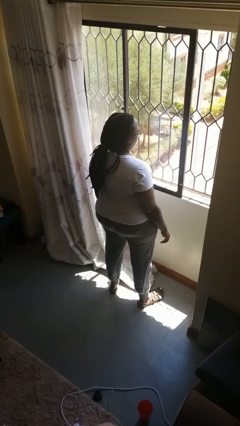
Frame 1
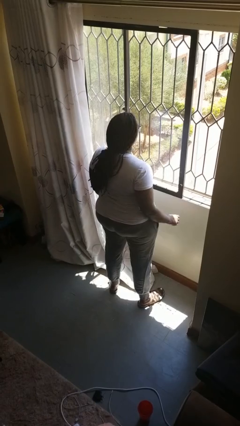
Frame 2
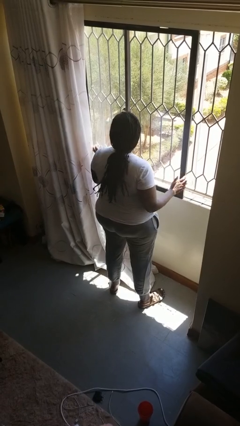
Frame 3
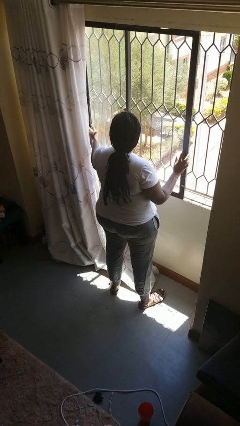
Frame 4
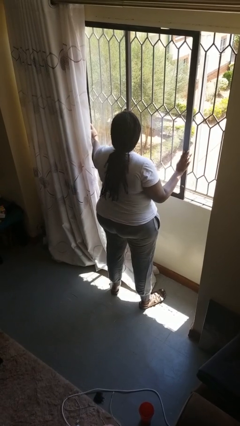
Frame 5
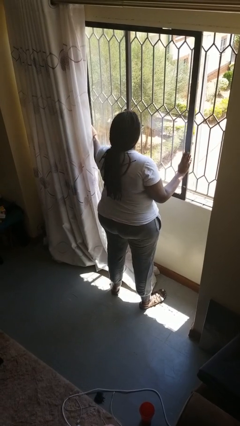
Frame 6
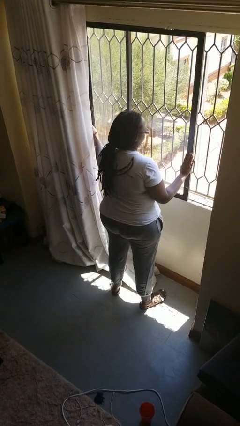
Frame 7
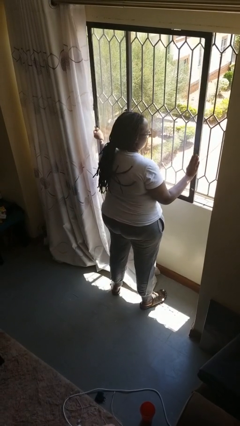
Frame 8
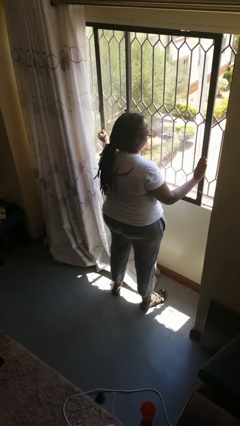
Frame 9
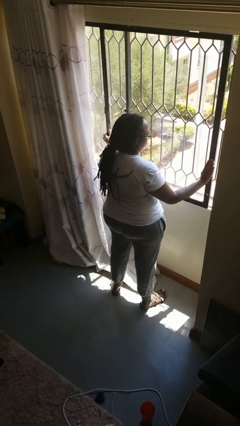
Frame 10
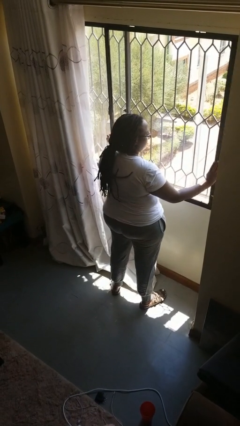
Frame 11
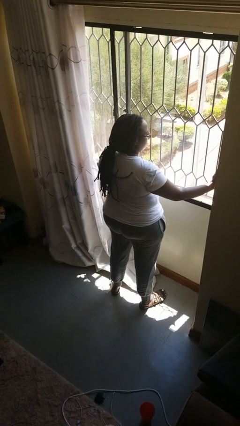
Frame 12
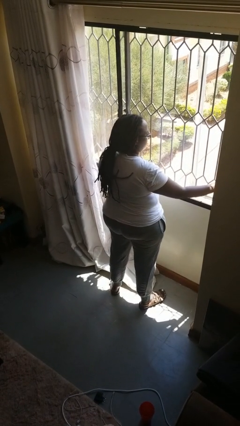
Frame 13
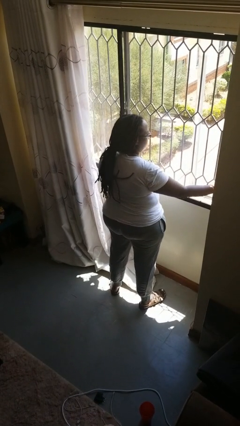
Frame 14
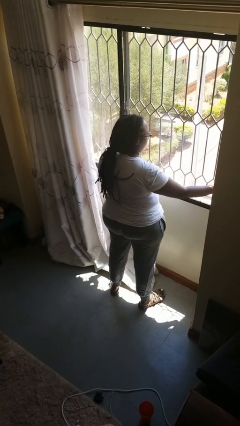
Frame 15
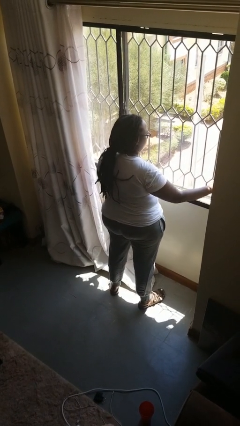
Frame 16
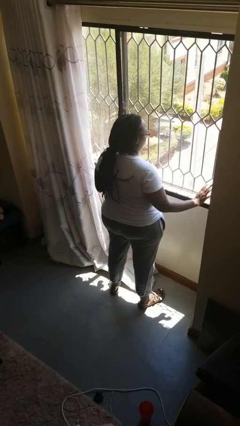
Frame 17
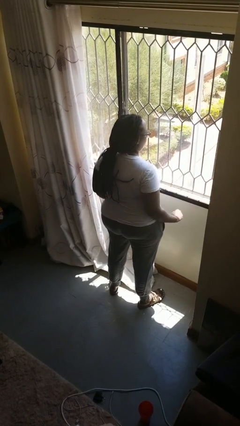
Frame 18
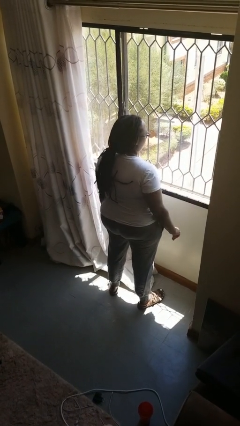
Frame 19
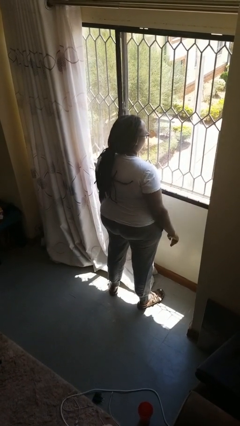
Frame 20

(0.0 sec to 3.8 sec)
person closes home window

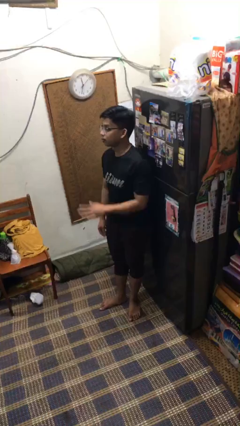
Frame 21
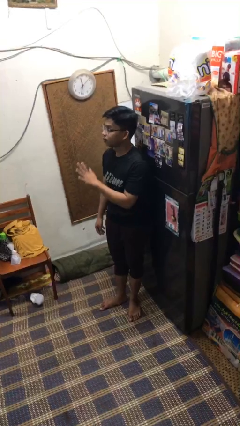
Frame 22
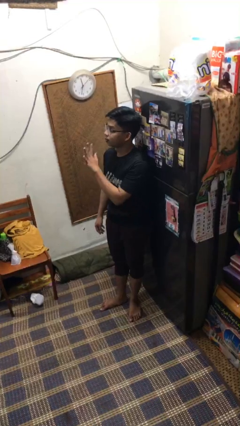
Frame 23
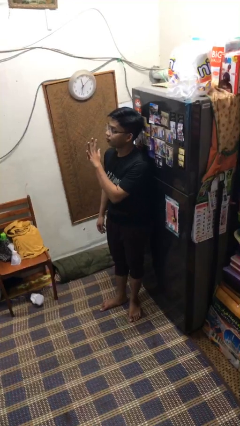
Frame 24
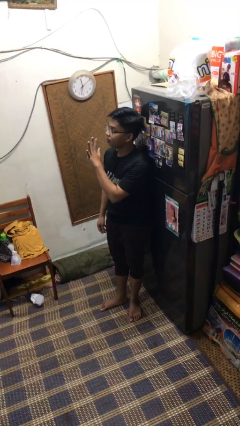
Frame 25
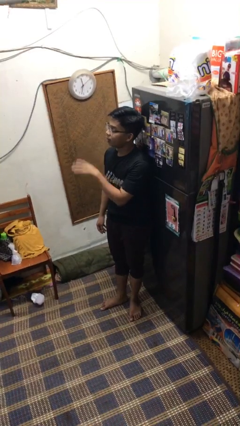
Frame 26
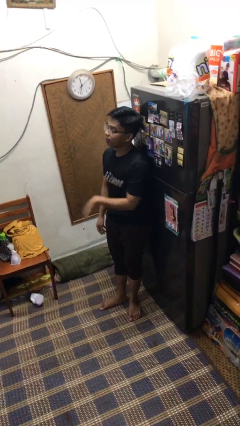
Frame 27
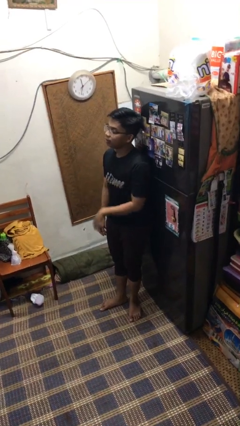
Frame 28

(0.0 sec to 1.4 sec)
person gestures number five

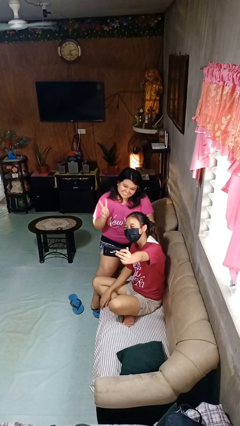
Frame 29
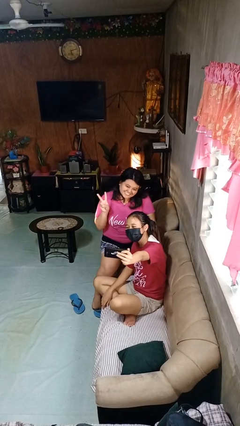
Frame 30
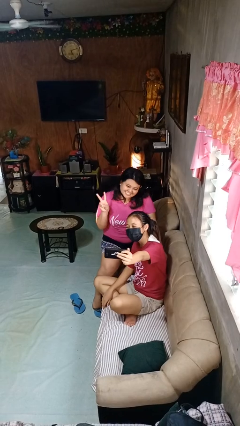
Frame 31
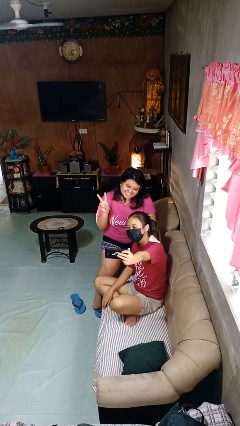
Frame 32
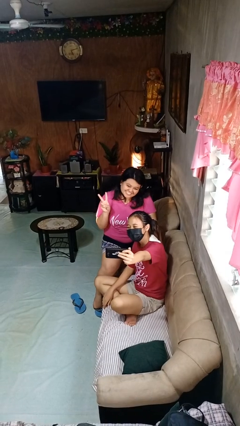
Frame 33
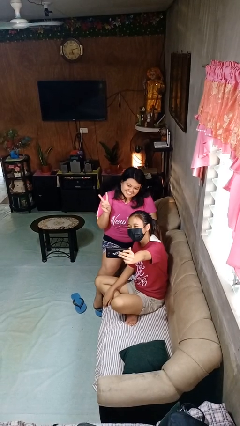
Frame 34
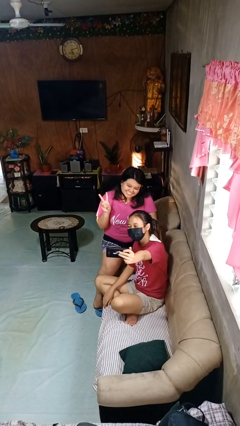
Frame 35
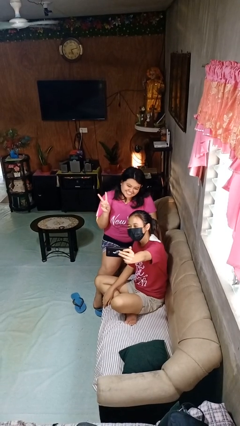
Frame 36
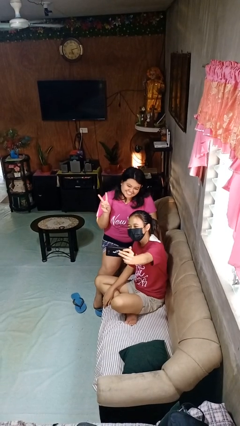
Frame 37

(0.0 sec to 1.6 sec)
person takes selfie with person

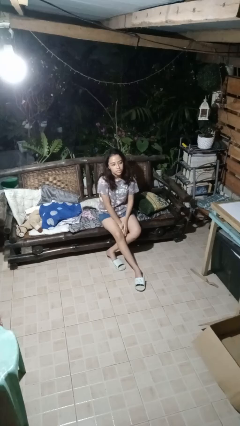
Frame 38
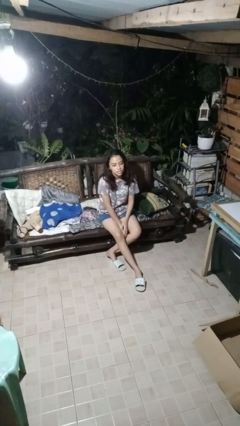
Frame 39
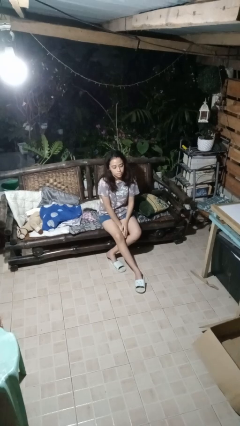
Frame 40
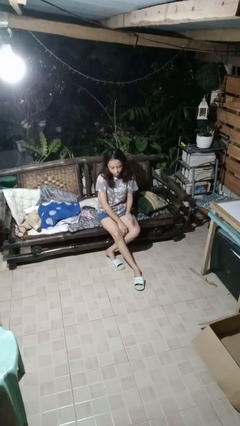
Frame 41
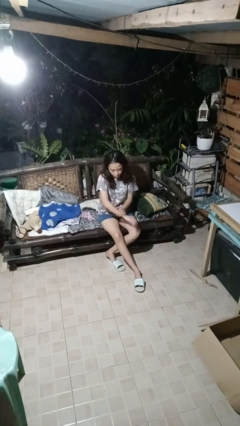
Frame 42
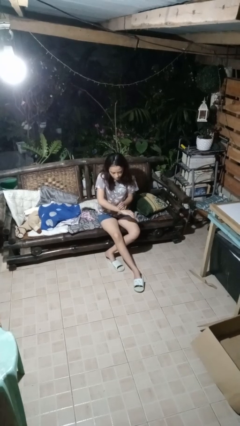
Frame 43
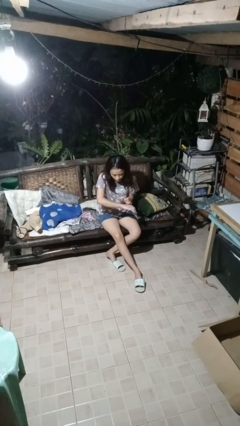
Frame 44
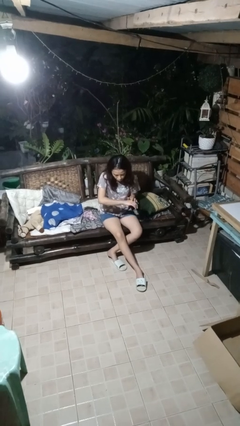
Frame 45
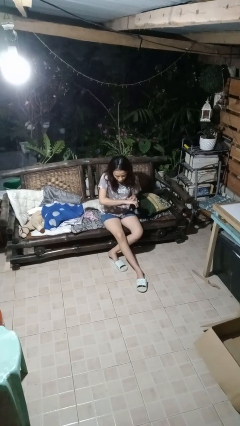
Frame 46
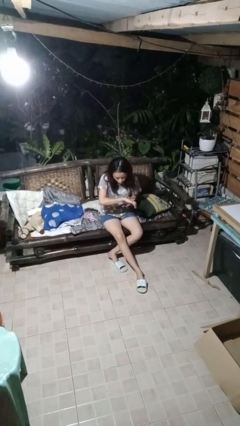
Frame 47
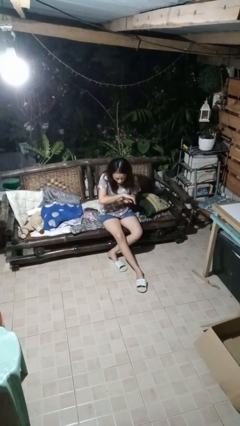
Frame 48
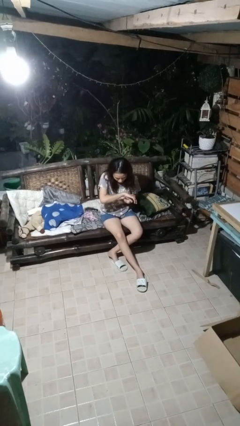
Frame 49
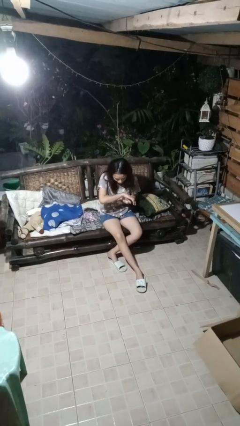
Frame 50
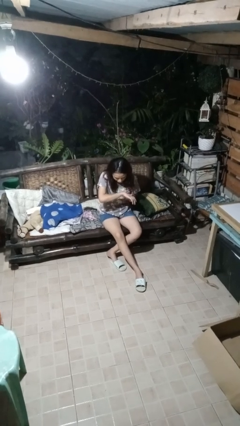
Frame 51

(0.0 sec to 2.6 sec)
person swats bug

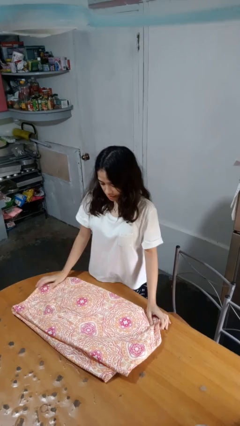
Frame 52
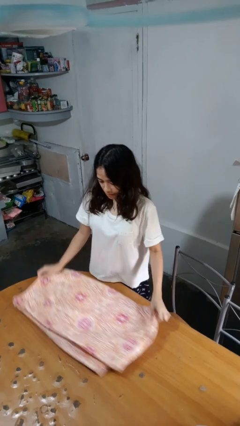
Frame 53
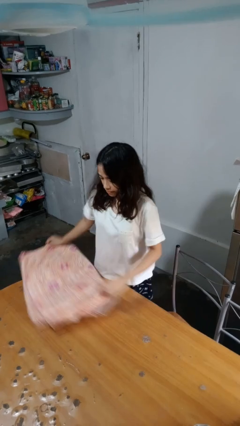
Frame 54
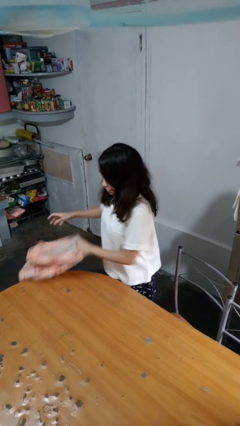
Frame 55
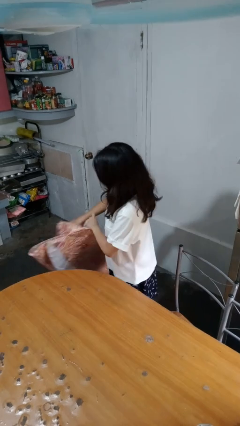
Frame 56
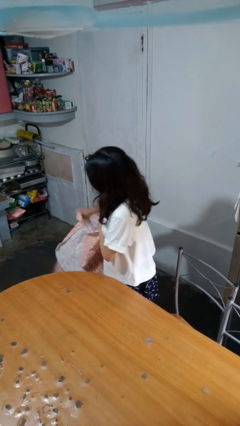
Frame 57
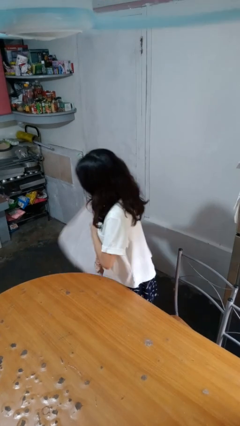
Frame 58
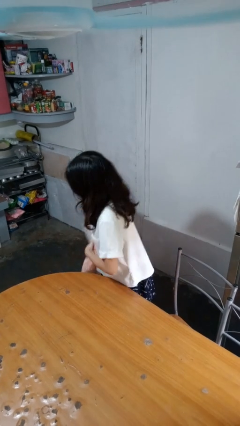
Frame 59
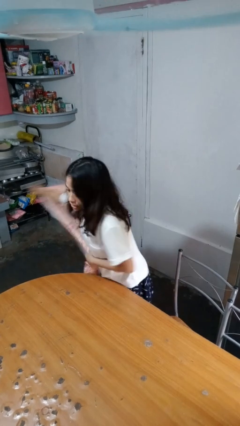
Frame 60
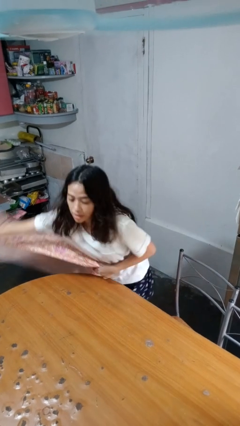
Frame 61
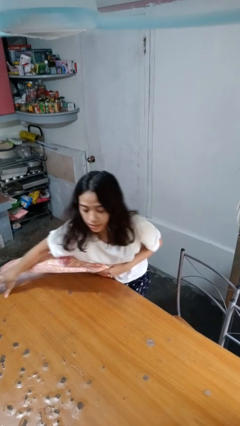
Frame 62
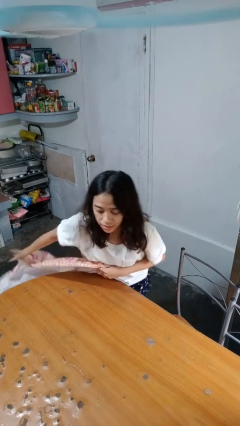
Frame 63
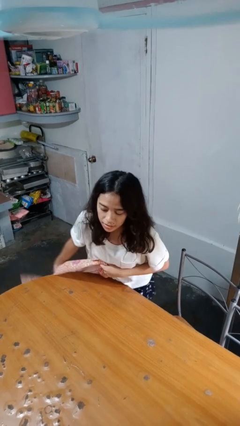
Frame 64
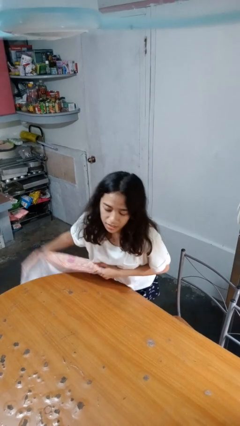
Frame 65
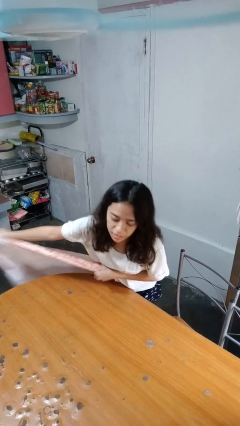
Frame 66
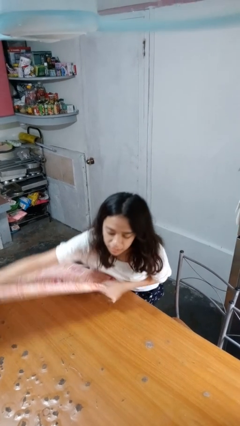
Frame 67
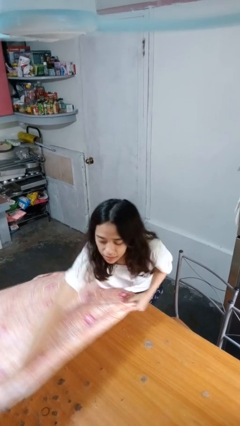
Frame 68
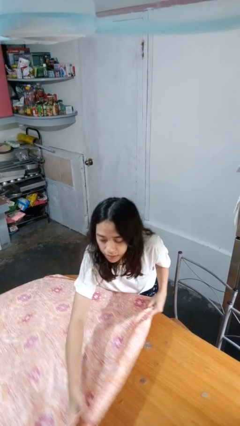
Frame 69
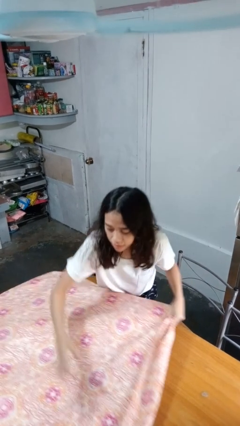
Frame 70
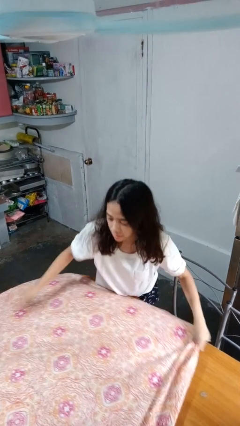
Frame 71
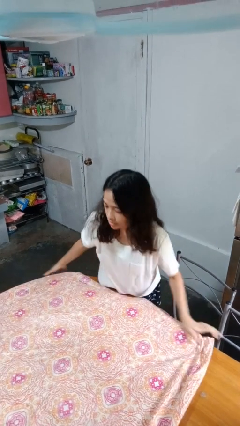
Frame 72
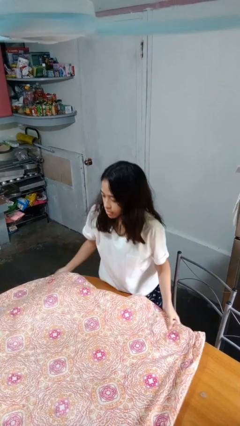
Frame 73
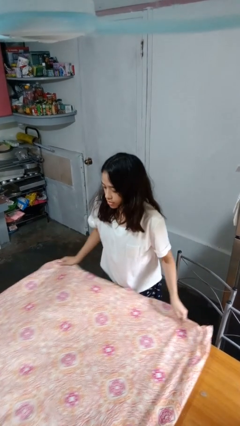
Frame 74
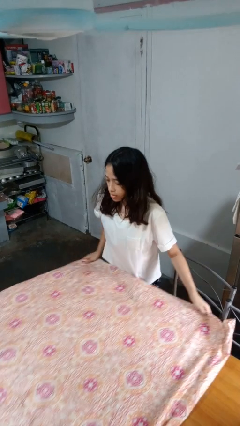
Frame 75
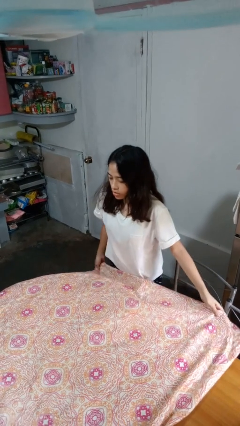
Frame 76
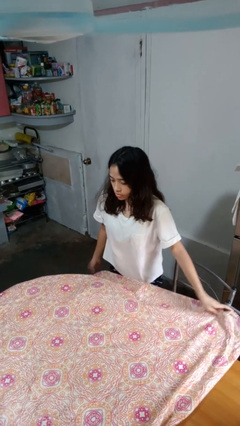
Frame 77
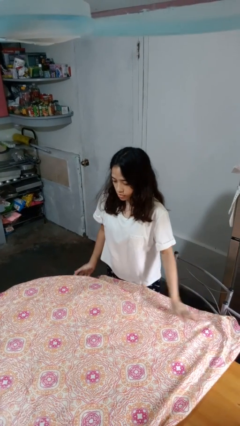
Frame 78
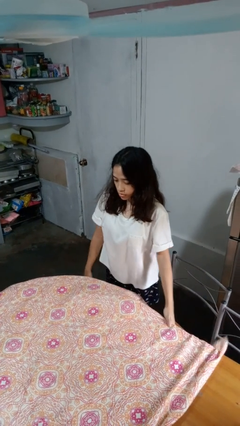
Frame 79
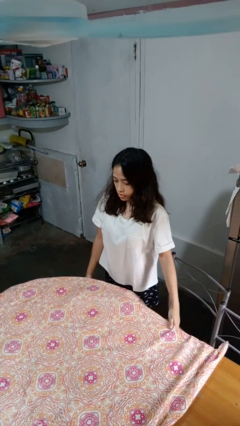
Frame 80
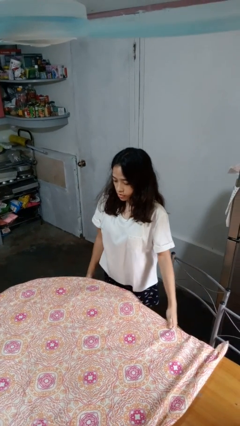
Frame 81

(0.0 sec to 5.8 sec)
person spreads tablecloth

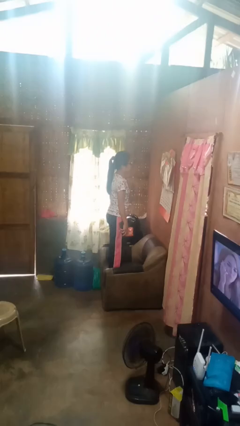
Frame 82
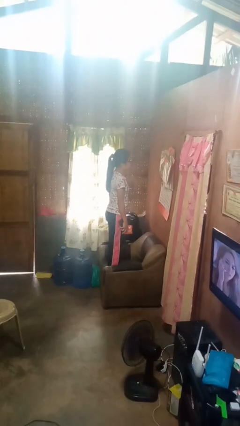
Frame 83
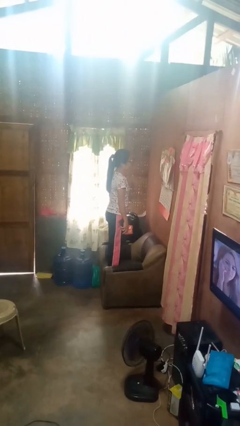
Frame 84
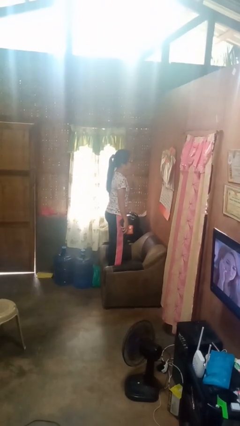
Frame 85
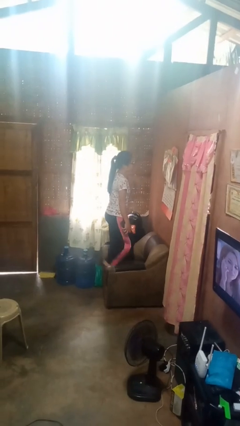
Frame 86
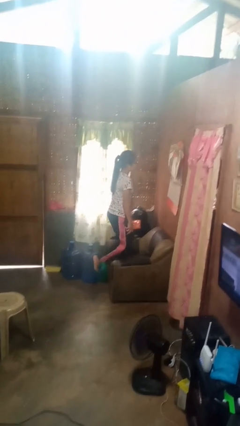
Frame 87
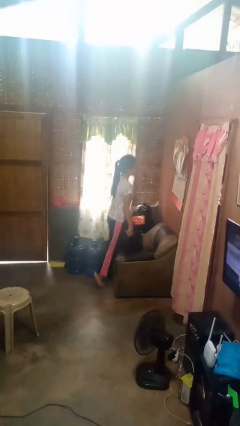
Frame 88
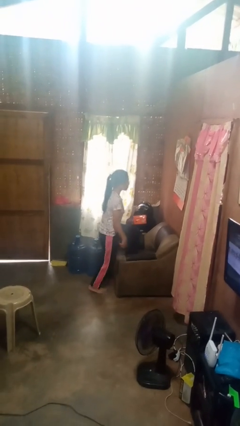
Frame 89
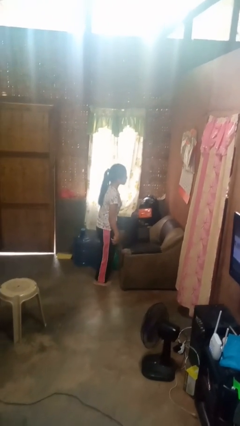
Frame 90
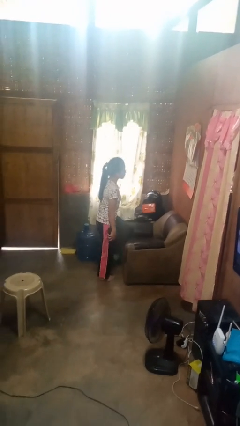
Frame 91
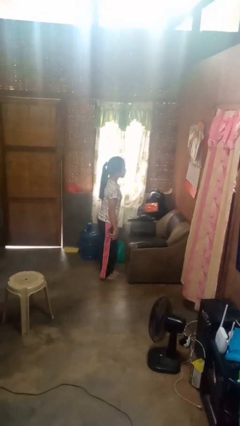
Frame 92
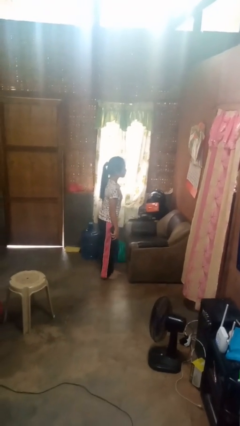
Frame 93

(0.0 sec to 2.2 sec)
person climbs off couch
